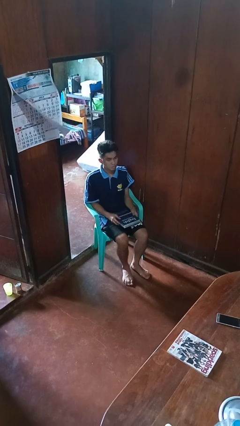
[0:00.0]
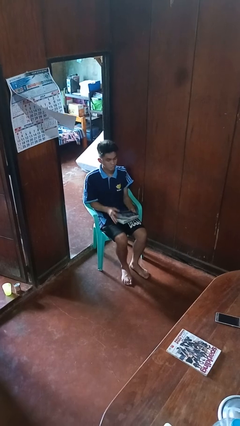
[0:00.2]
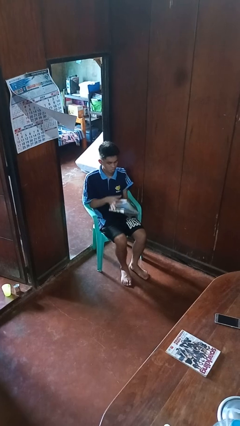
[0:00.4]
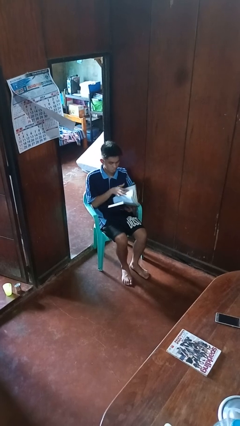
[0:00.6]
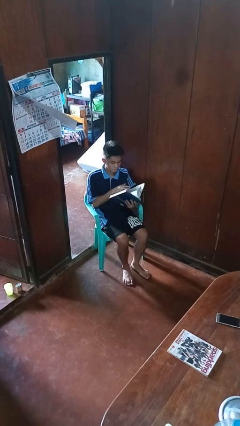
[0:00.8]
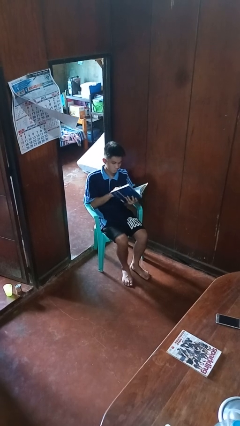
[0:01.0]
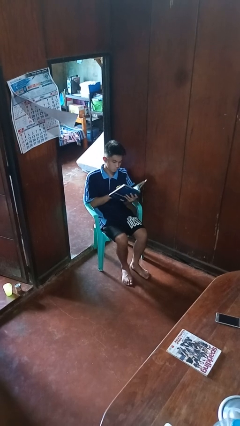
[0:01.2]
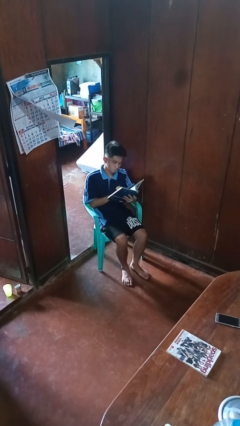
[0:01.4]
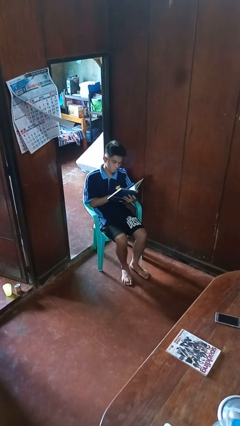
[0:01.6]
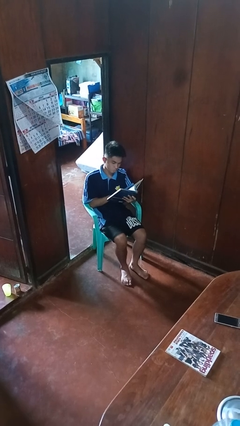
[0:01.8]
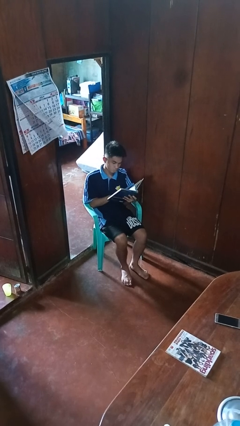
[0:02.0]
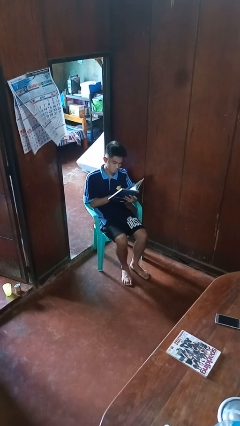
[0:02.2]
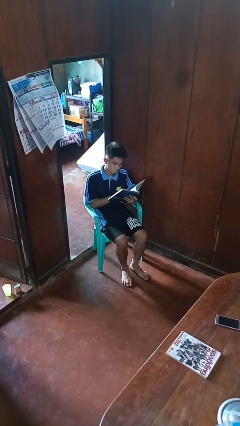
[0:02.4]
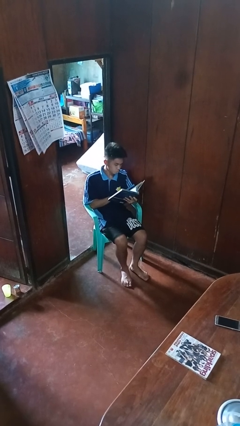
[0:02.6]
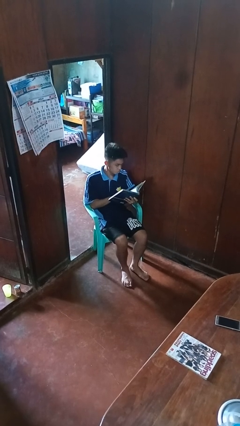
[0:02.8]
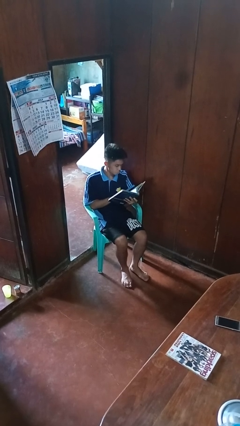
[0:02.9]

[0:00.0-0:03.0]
person reads book

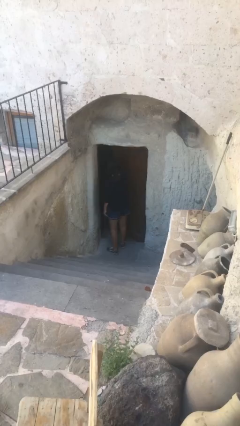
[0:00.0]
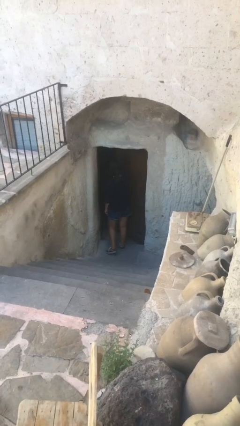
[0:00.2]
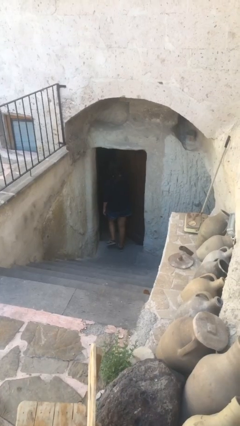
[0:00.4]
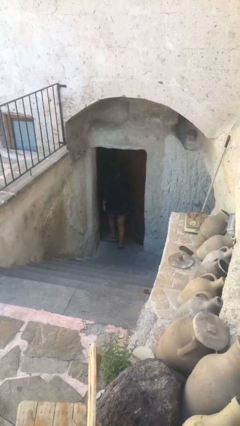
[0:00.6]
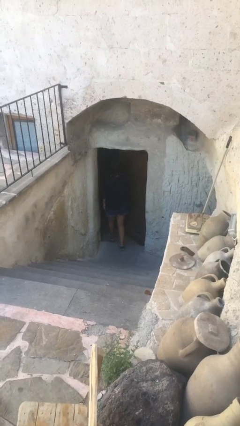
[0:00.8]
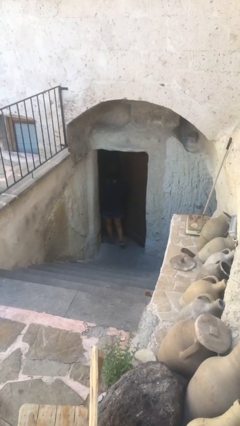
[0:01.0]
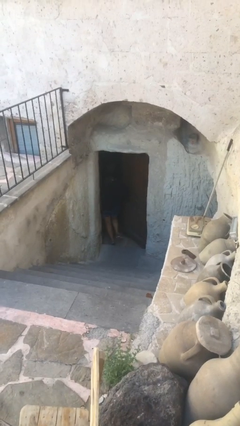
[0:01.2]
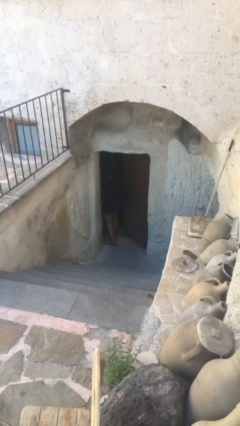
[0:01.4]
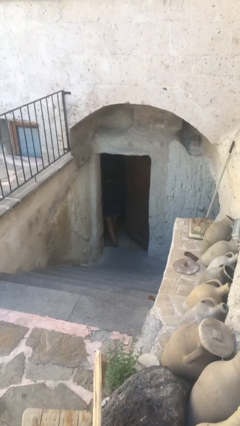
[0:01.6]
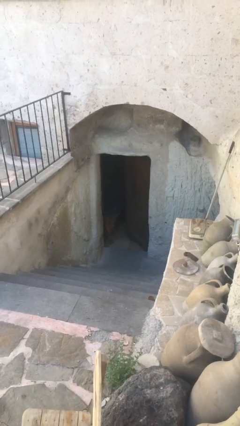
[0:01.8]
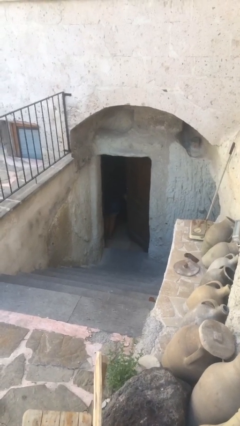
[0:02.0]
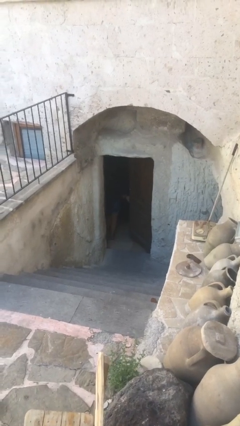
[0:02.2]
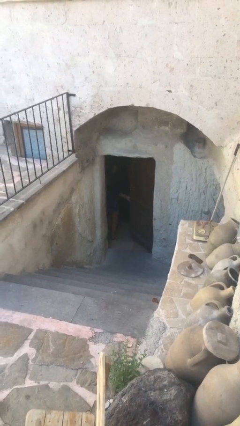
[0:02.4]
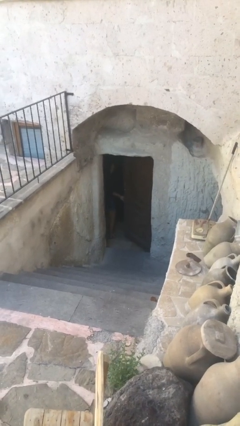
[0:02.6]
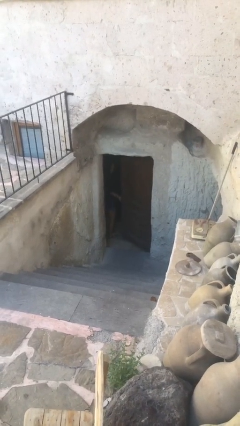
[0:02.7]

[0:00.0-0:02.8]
person exits scene through structure

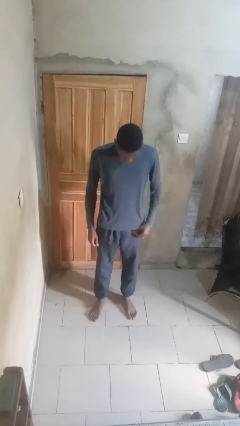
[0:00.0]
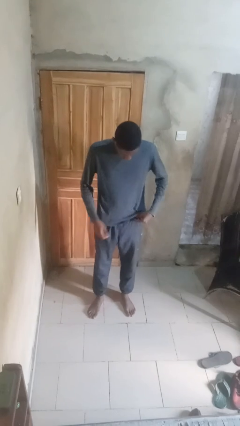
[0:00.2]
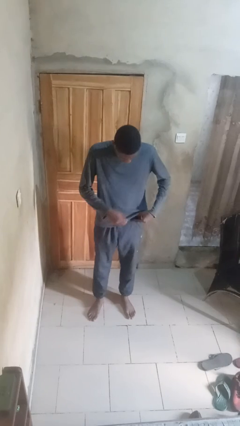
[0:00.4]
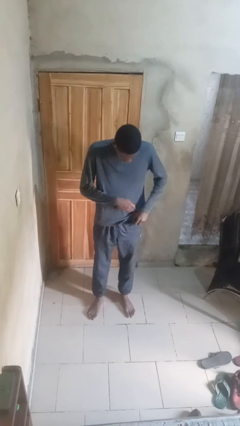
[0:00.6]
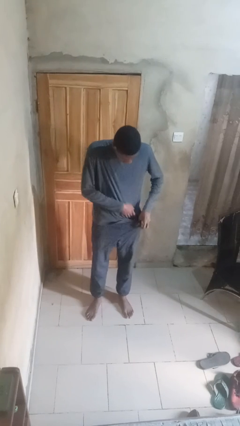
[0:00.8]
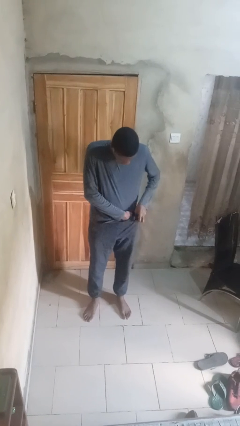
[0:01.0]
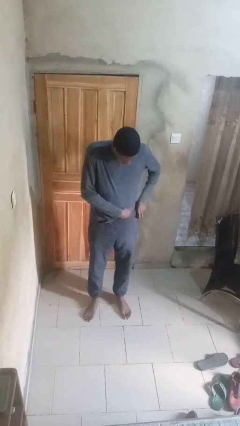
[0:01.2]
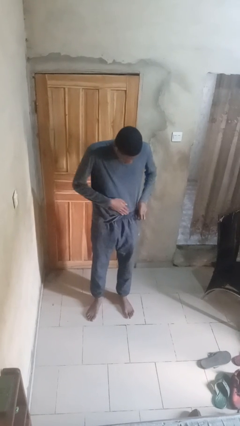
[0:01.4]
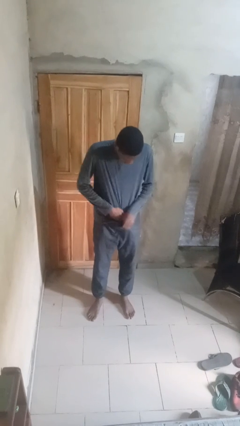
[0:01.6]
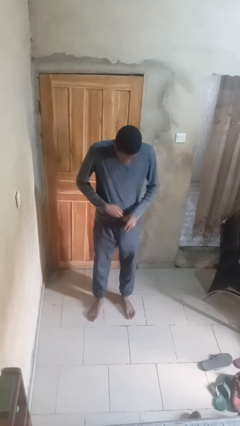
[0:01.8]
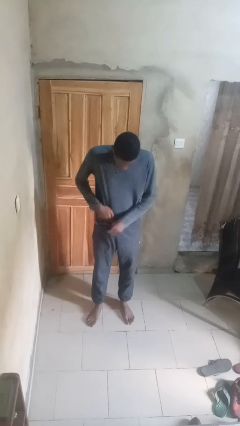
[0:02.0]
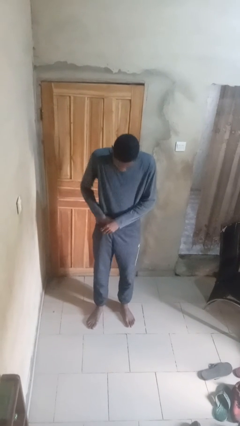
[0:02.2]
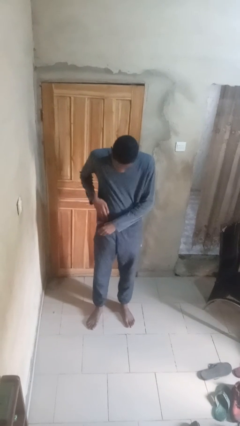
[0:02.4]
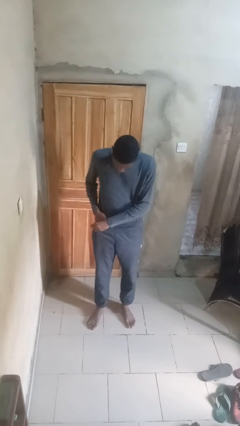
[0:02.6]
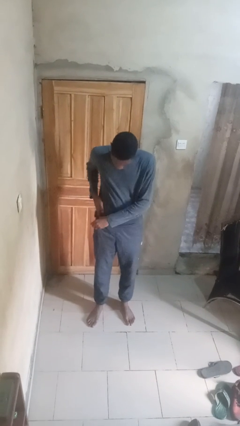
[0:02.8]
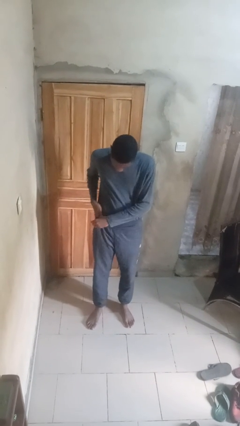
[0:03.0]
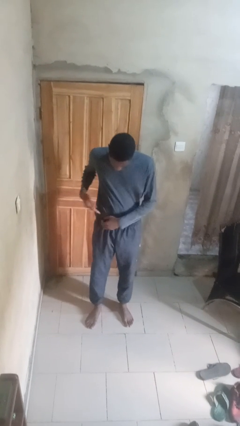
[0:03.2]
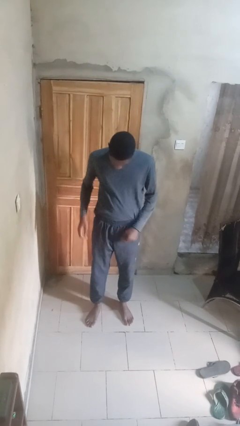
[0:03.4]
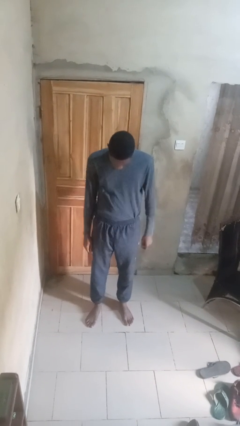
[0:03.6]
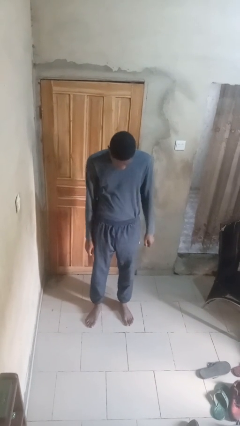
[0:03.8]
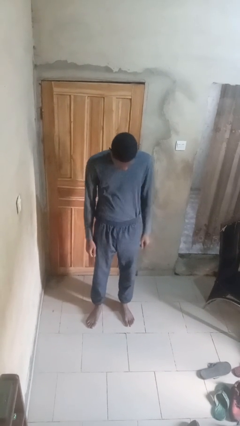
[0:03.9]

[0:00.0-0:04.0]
person tucks in shirt

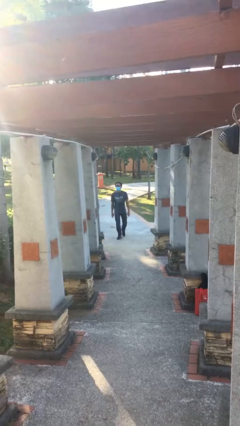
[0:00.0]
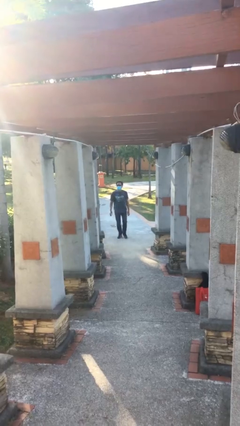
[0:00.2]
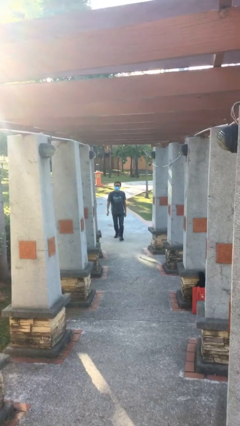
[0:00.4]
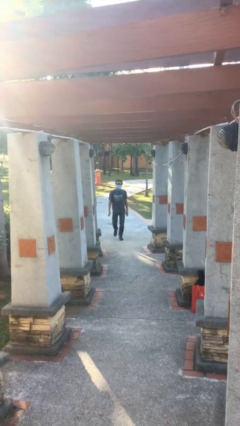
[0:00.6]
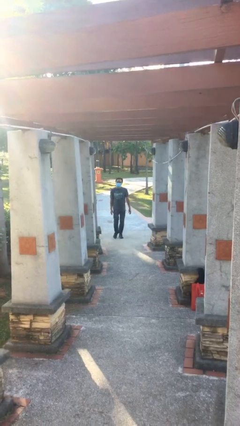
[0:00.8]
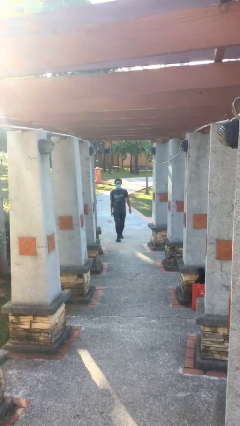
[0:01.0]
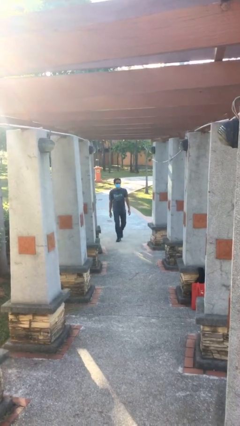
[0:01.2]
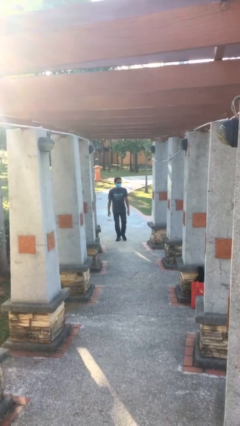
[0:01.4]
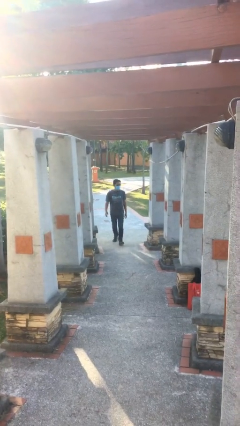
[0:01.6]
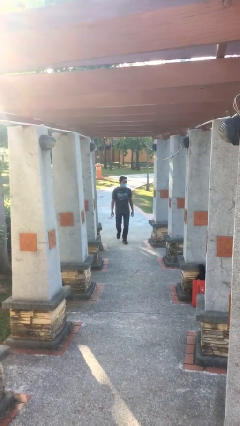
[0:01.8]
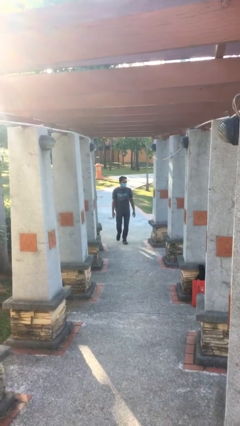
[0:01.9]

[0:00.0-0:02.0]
person enters scene through structure

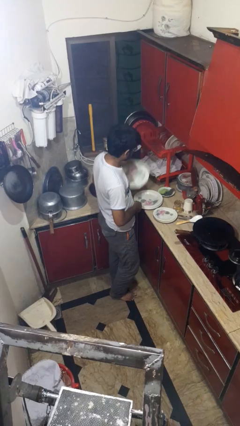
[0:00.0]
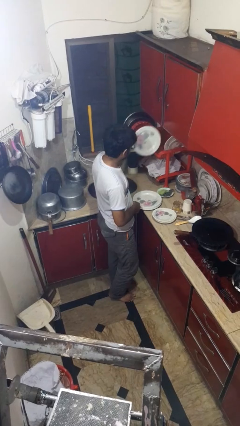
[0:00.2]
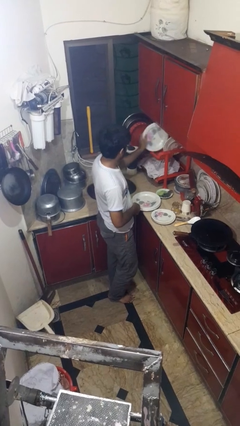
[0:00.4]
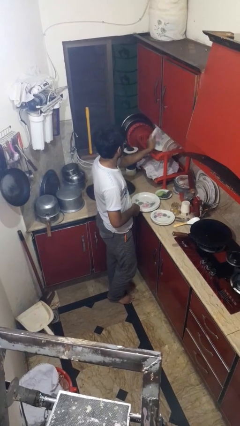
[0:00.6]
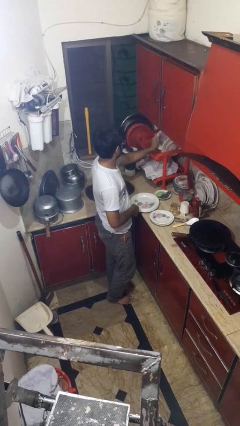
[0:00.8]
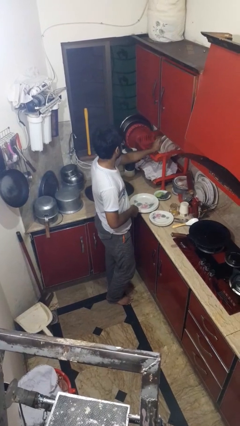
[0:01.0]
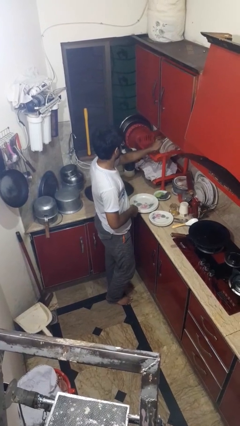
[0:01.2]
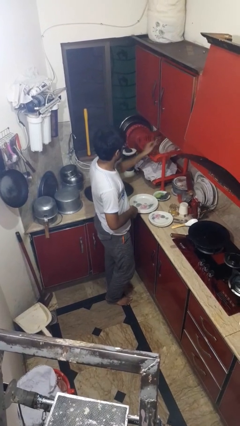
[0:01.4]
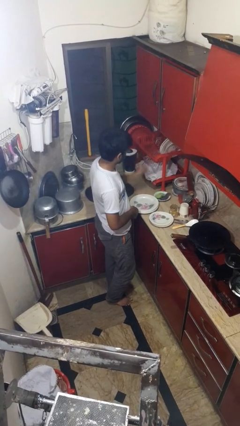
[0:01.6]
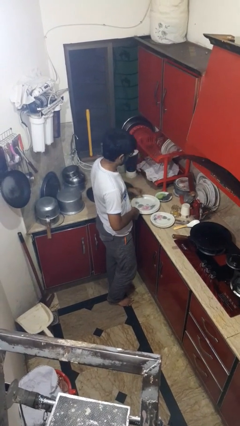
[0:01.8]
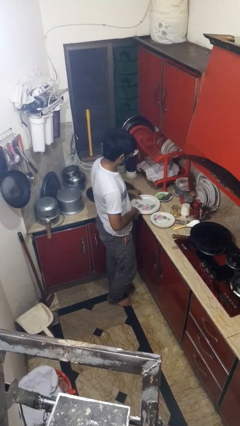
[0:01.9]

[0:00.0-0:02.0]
person loads dishwasher

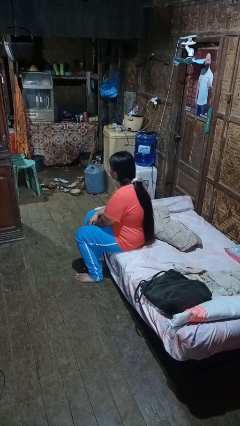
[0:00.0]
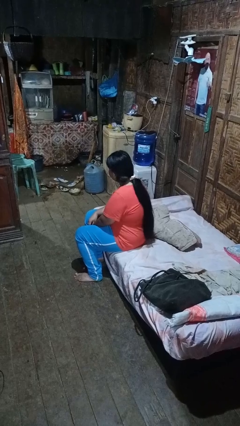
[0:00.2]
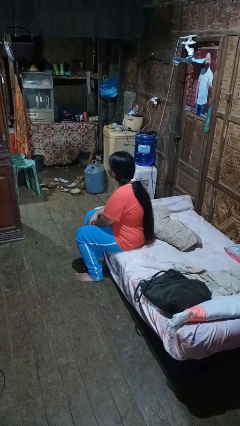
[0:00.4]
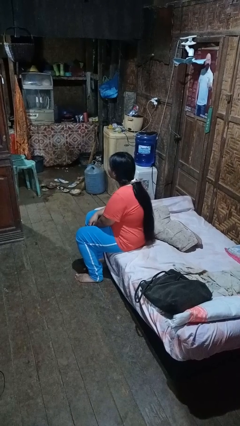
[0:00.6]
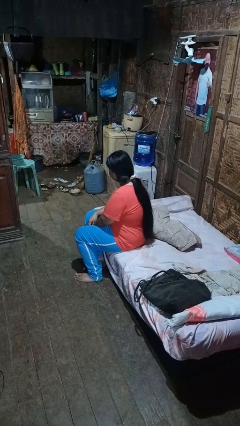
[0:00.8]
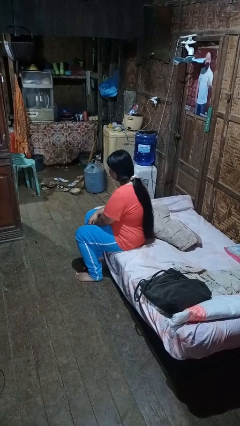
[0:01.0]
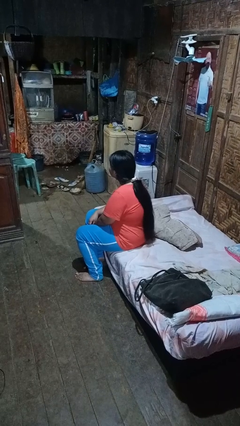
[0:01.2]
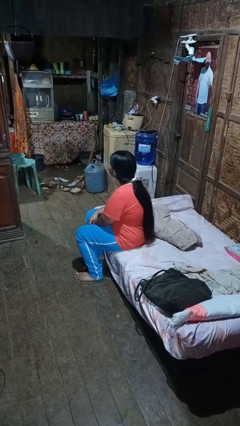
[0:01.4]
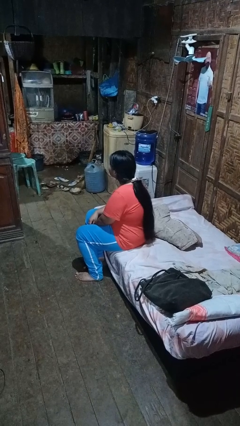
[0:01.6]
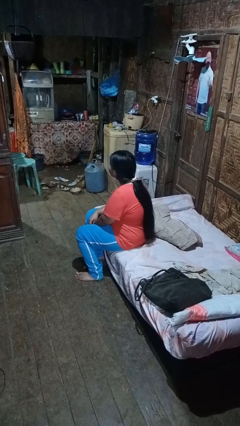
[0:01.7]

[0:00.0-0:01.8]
person nods head

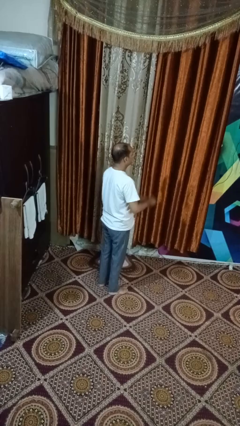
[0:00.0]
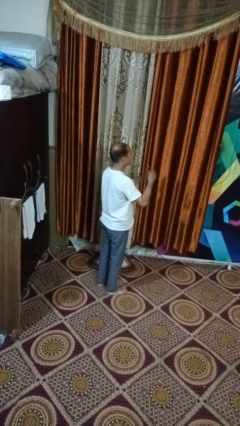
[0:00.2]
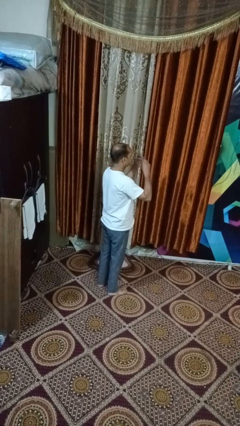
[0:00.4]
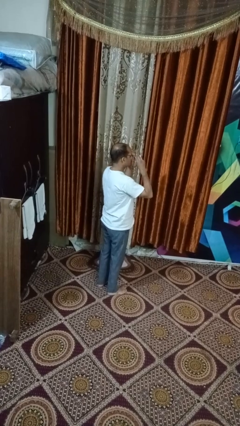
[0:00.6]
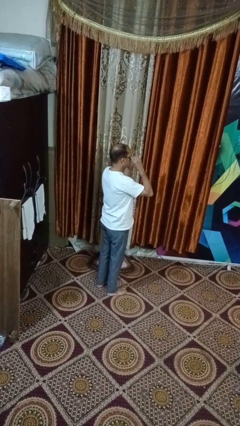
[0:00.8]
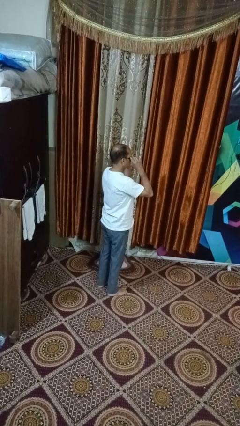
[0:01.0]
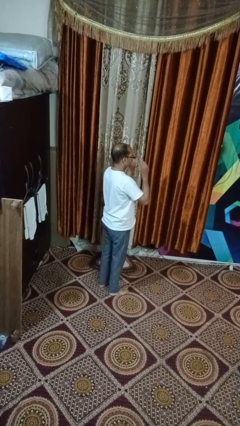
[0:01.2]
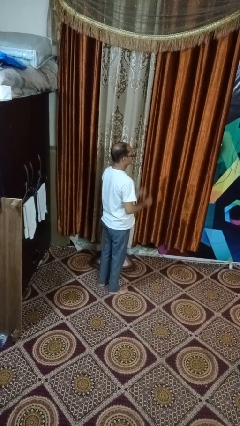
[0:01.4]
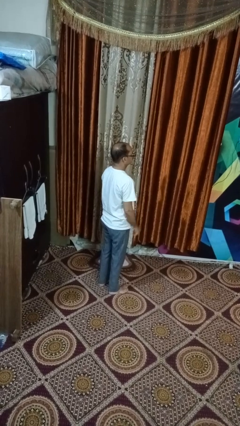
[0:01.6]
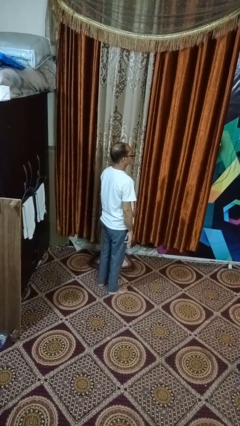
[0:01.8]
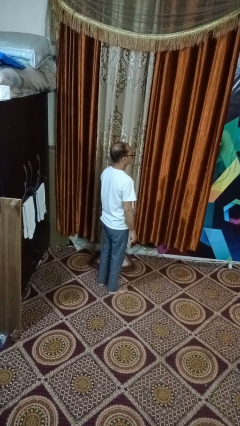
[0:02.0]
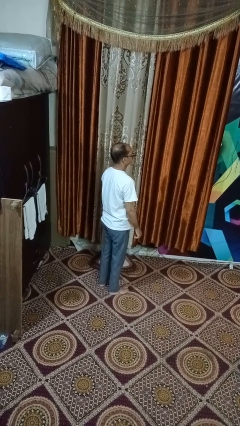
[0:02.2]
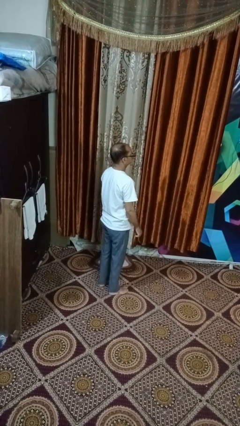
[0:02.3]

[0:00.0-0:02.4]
person puts on glasses
